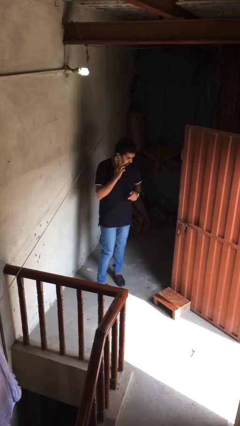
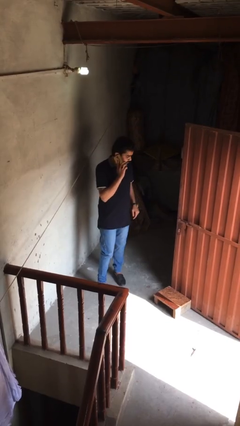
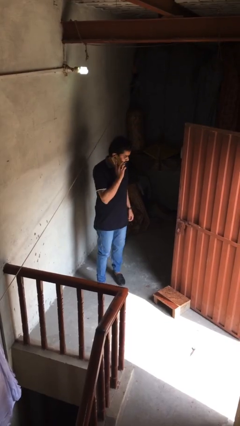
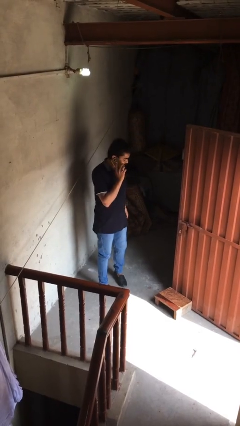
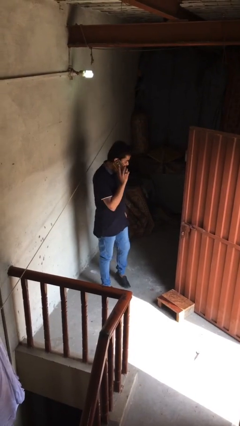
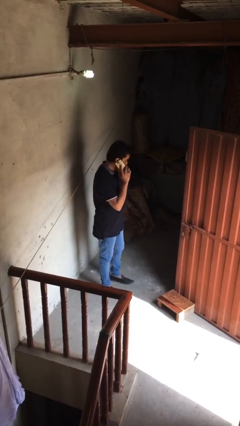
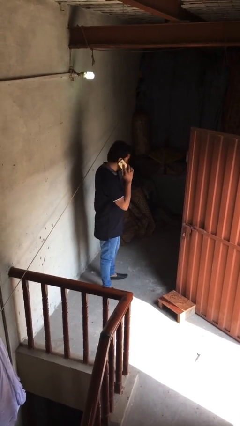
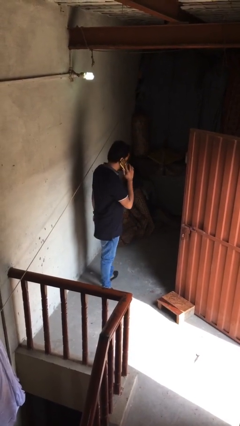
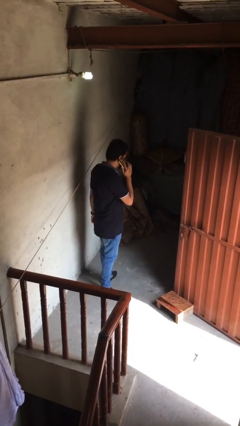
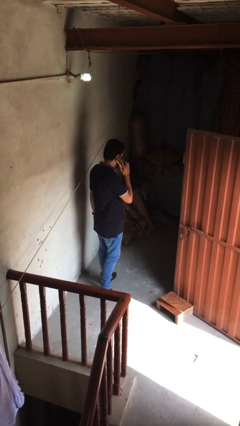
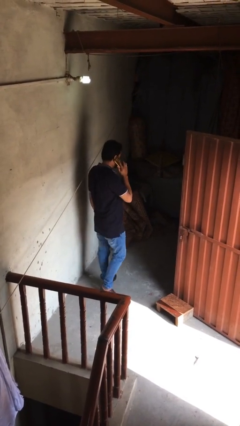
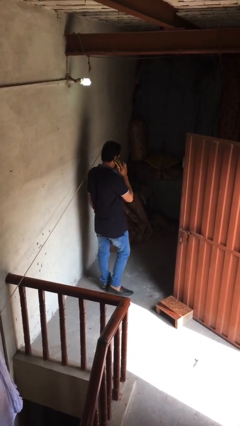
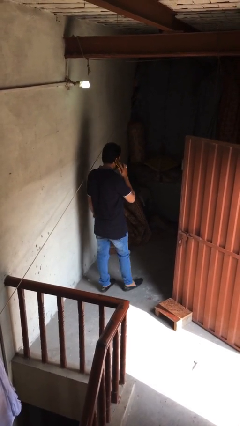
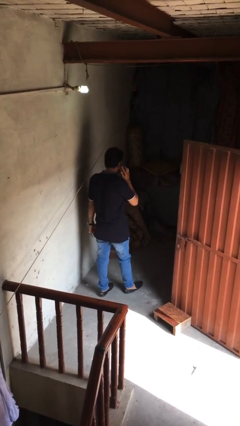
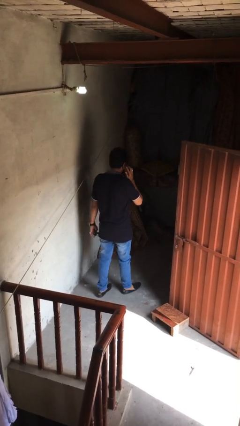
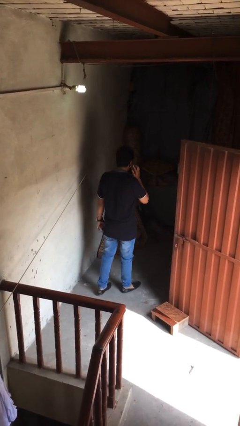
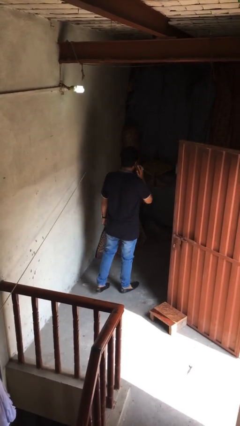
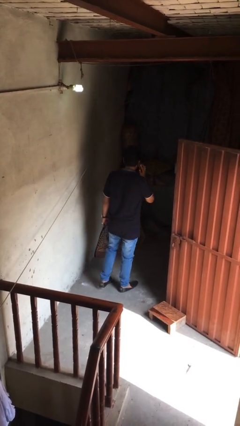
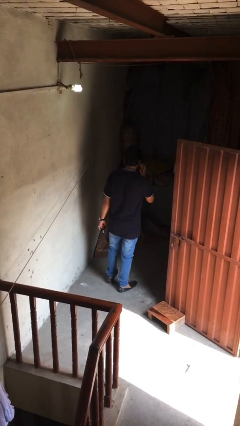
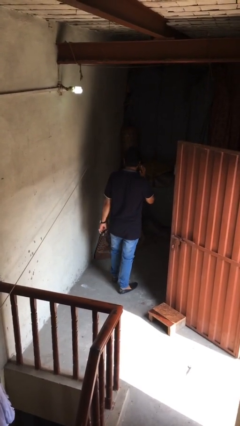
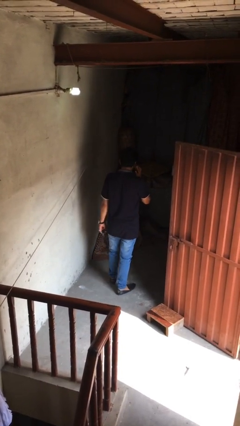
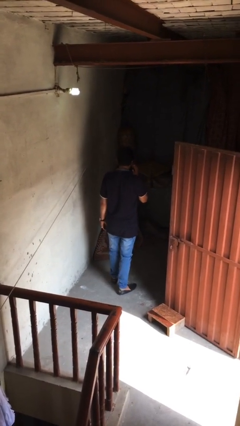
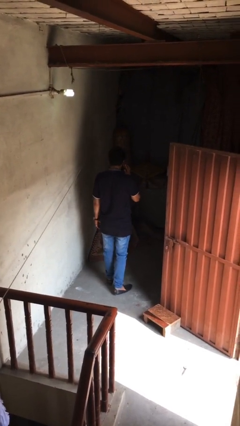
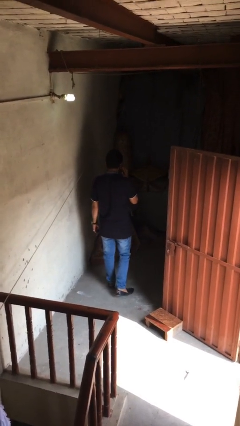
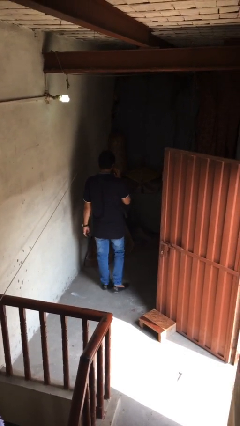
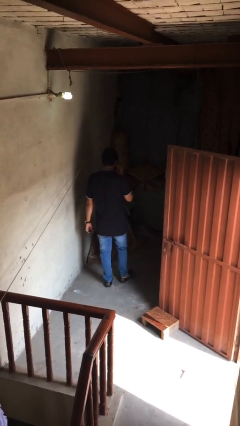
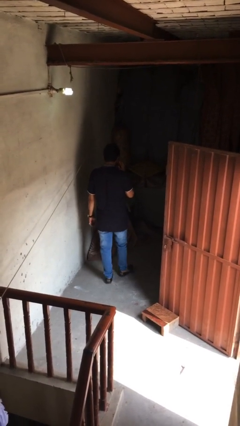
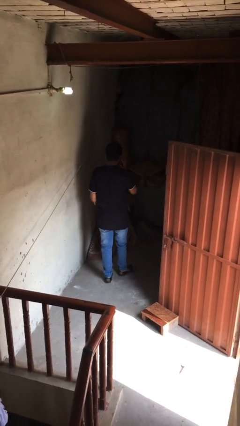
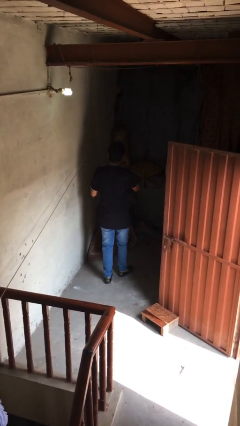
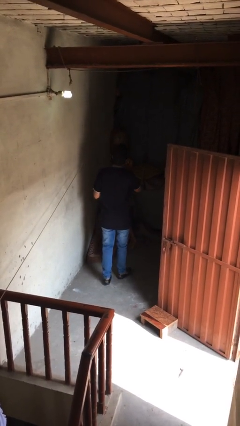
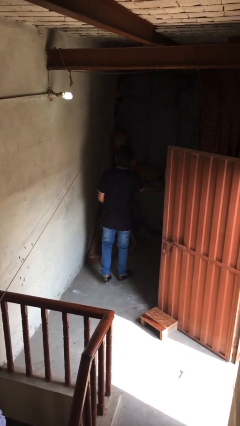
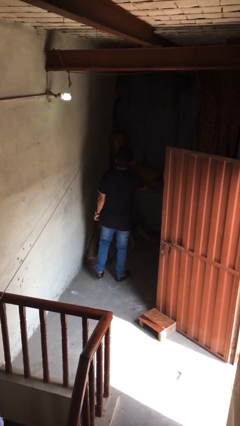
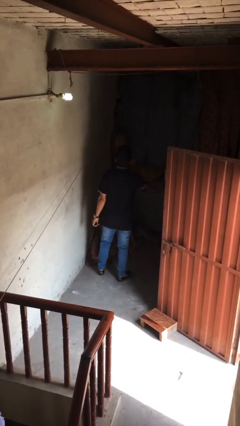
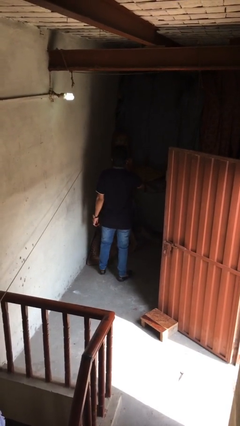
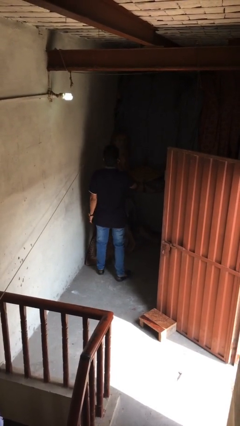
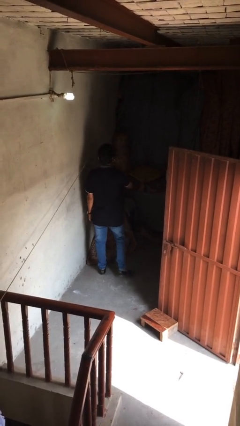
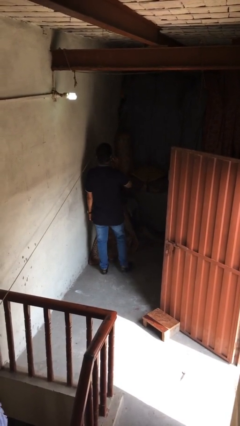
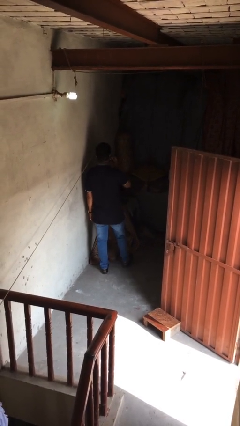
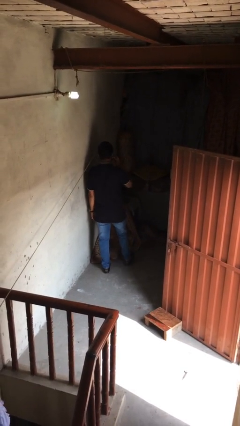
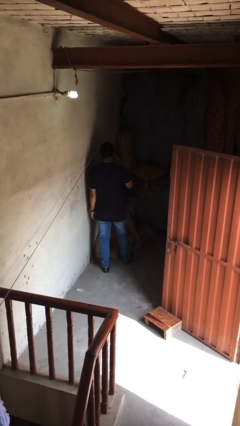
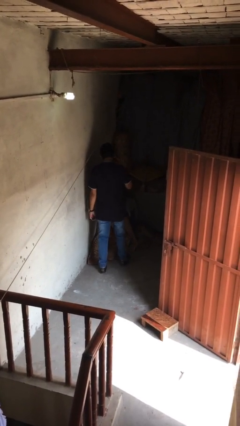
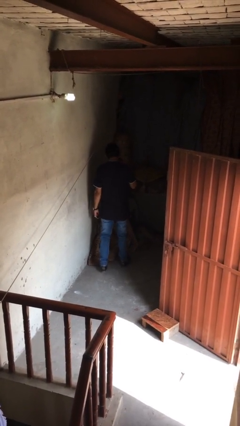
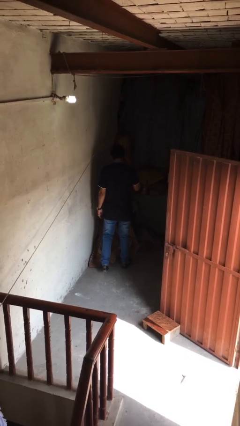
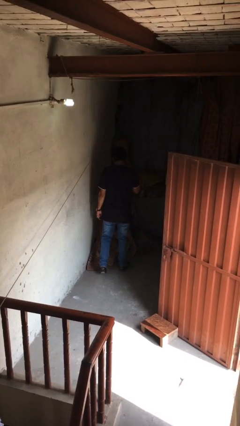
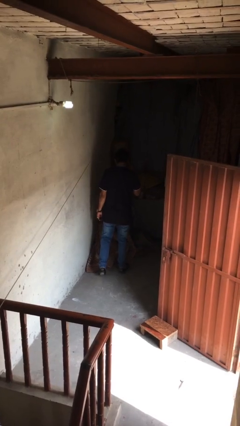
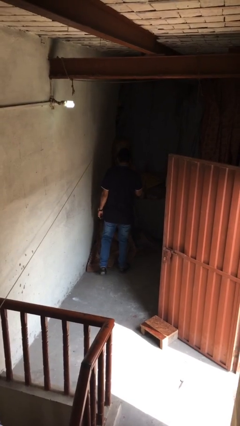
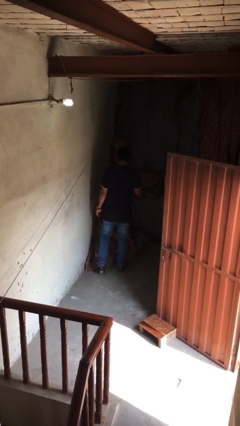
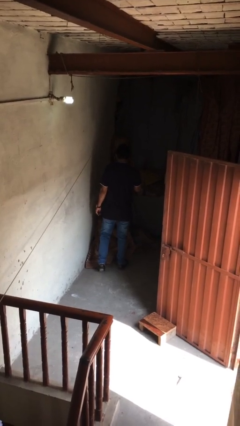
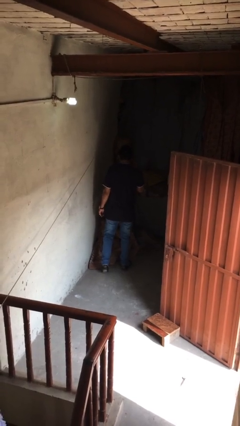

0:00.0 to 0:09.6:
person talks on phone

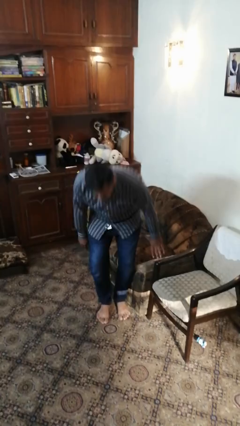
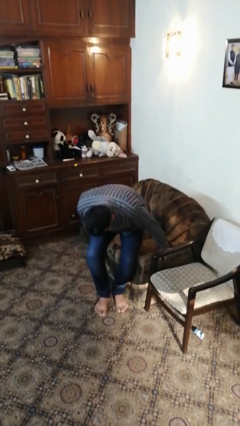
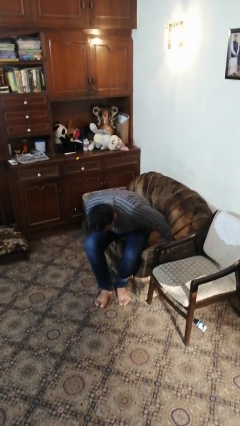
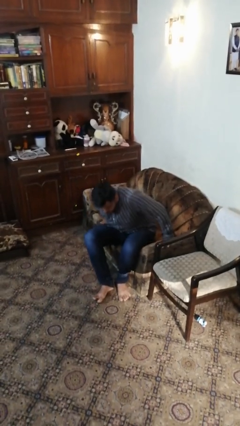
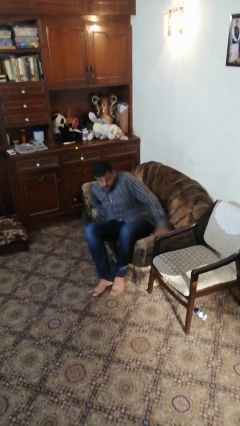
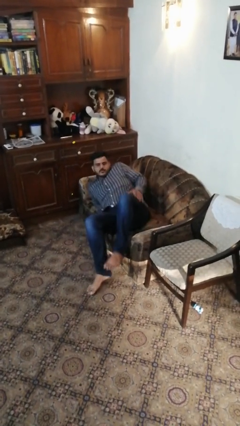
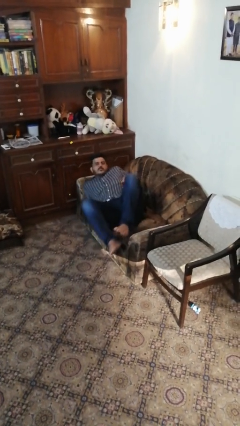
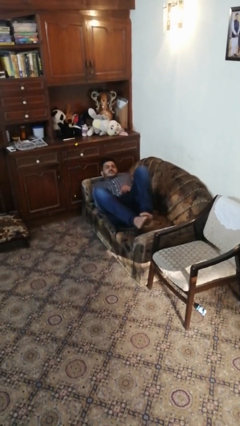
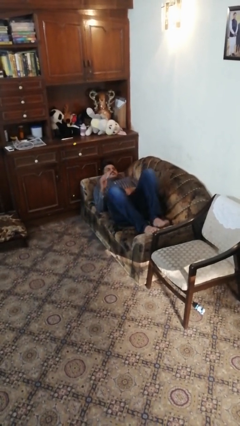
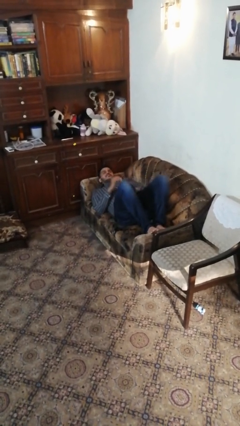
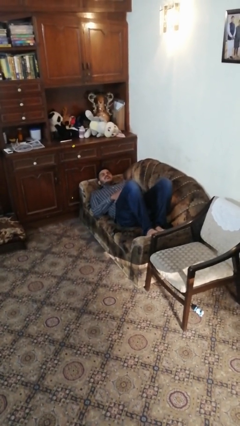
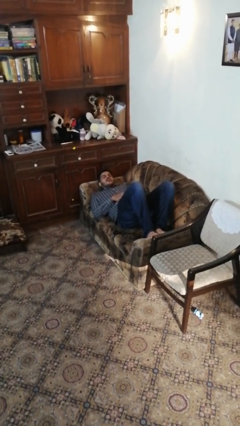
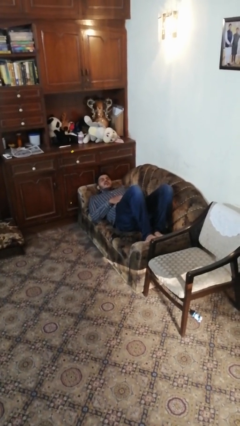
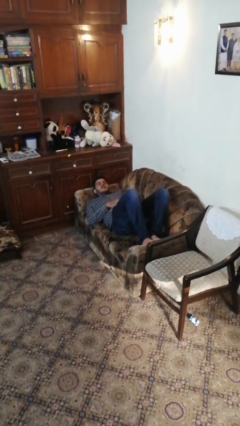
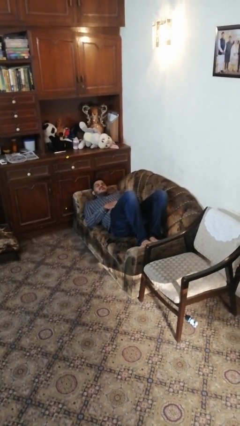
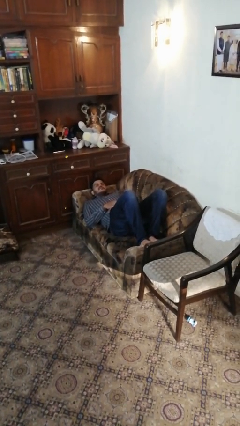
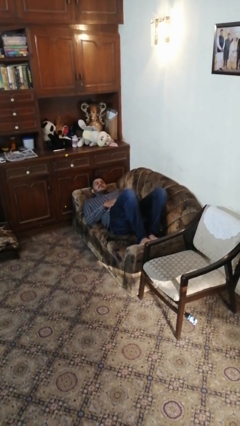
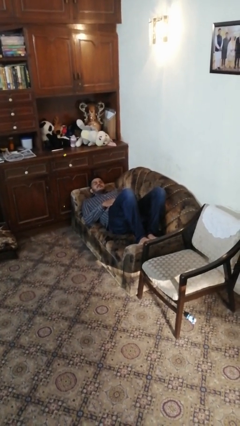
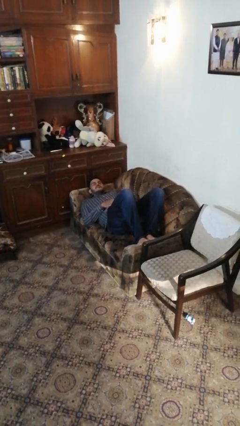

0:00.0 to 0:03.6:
person lies down on couch

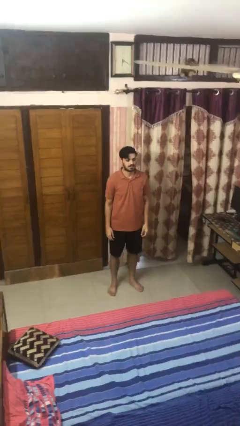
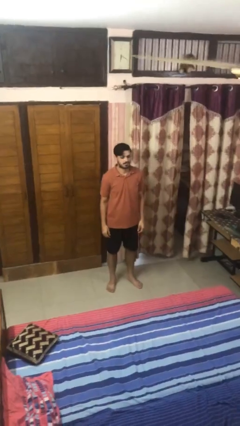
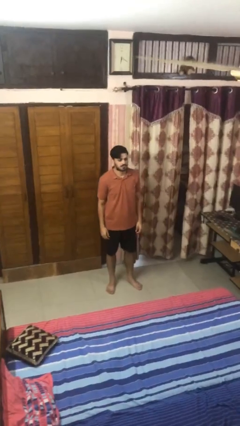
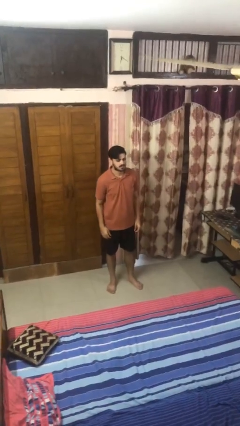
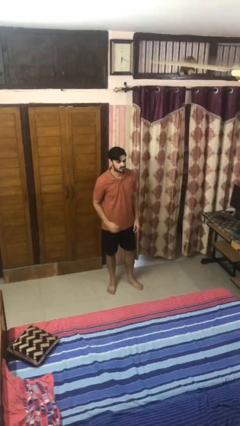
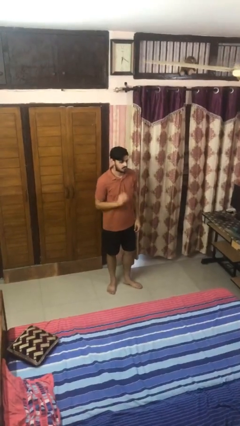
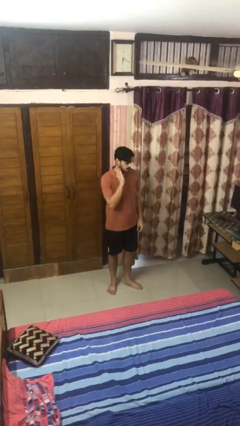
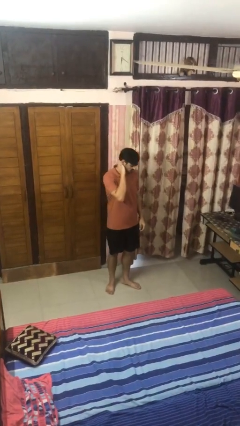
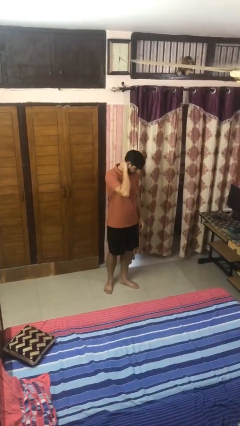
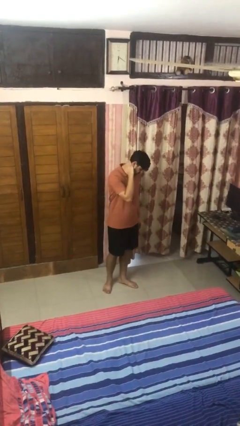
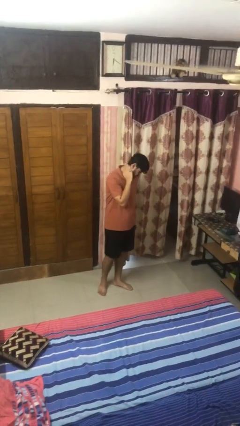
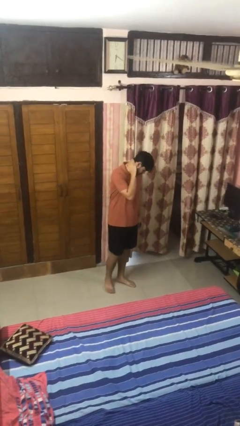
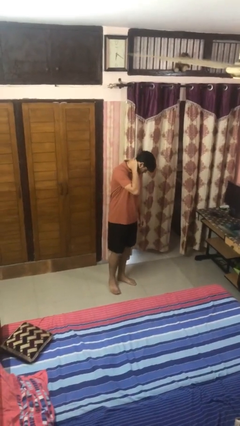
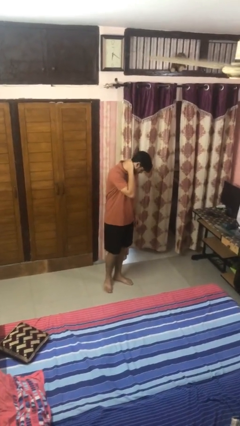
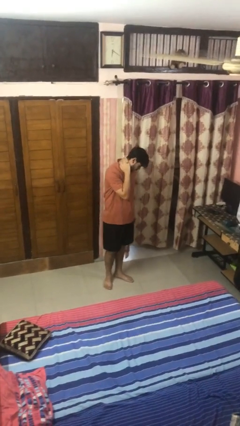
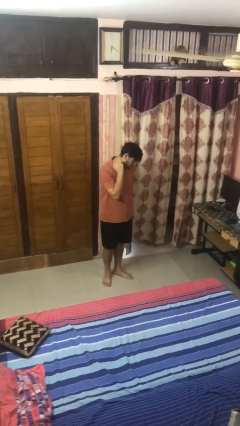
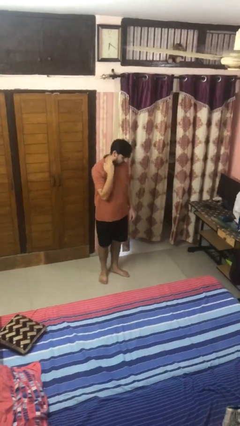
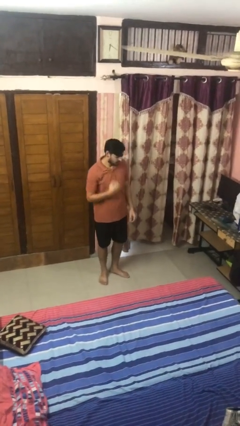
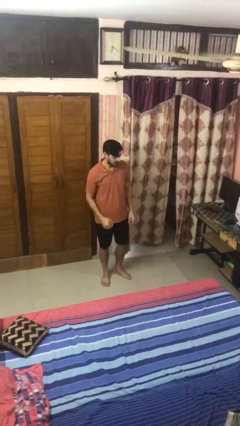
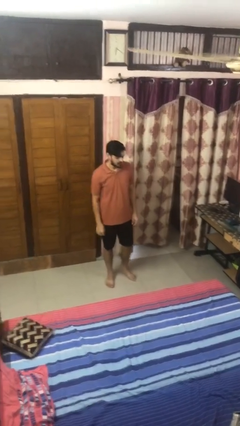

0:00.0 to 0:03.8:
person rubs neck

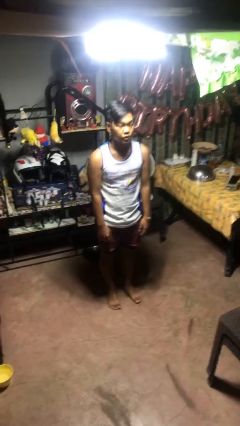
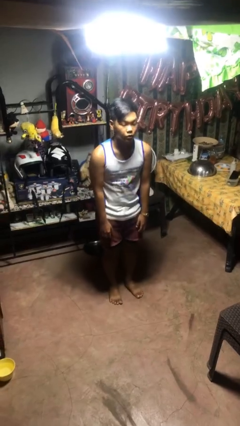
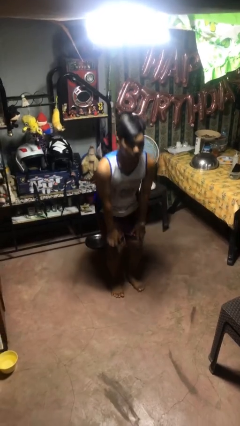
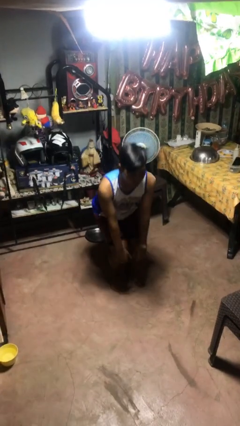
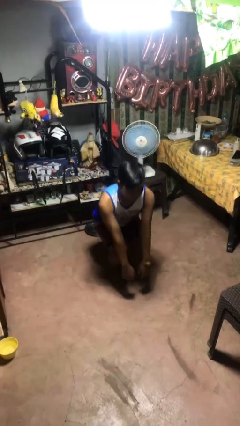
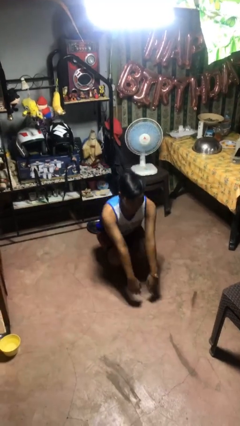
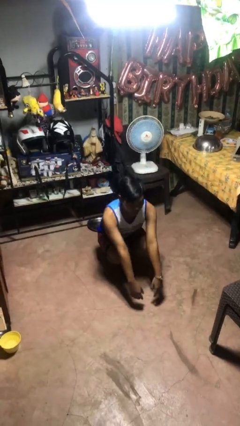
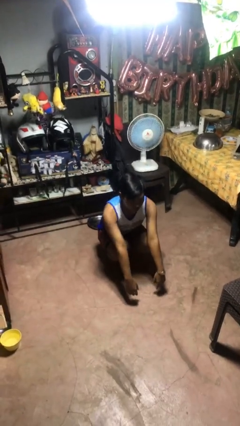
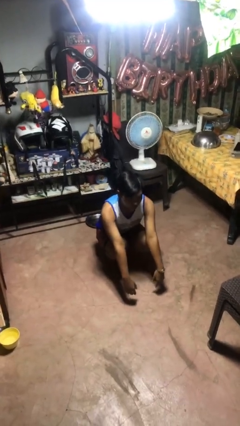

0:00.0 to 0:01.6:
person squats
